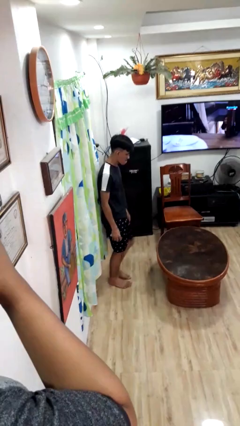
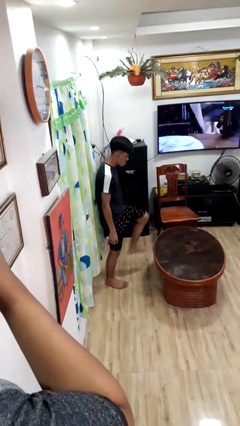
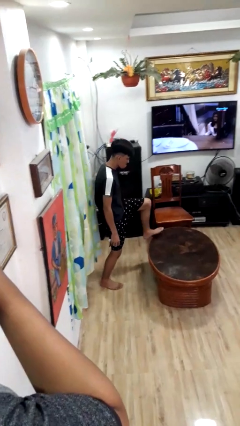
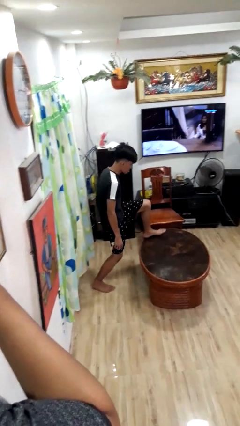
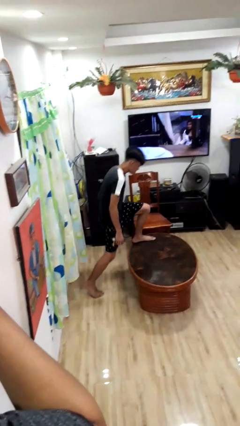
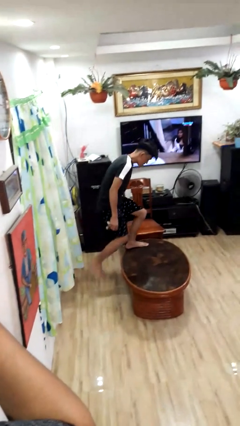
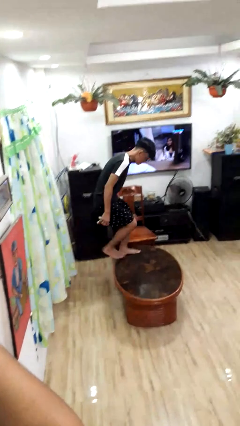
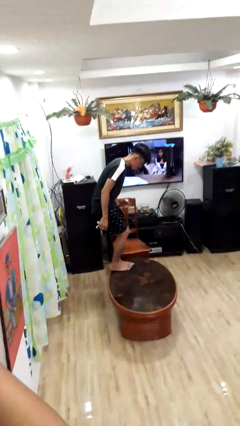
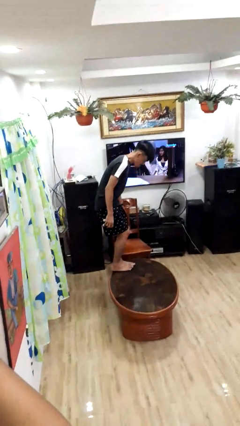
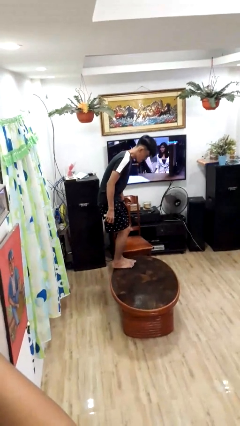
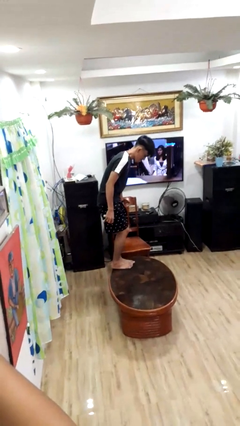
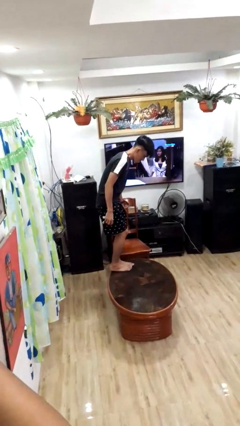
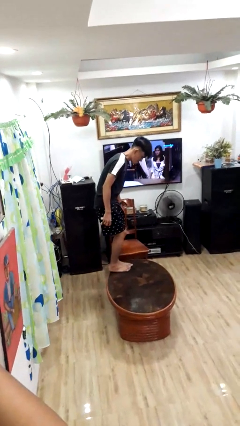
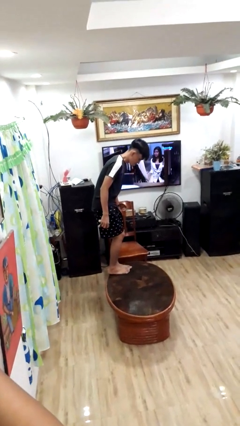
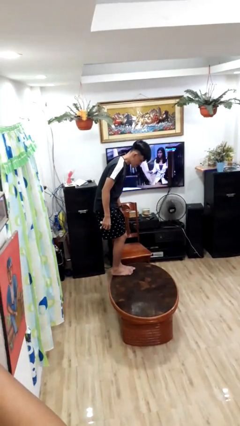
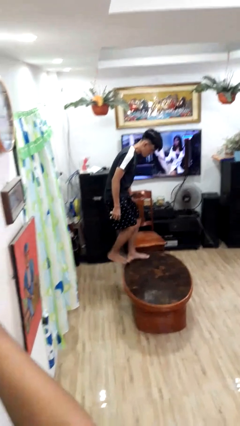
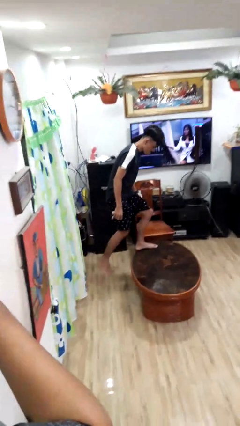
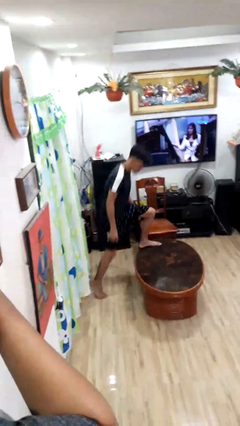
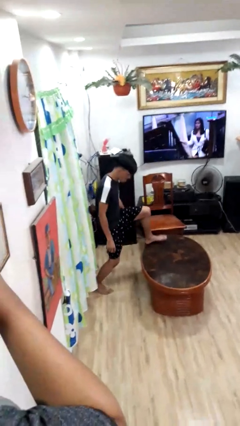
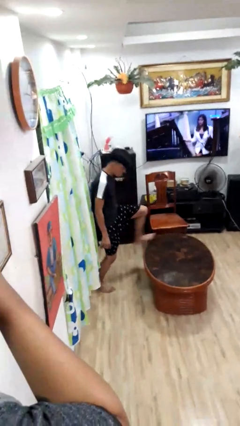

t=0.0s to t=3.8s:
person climbs on table

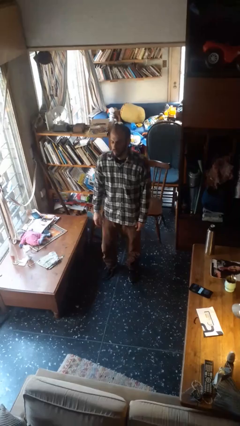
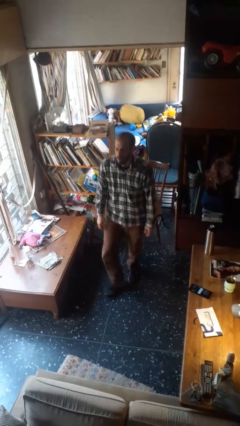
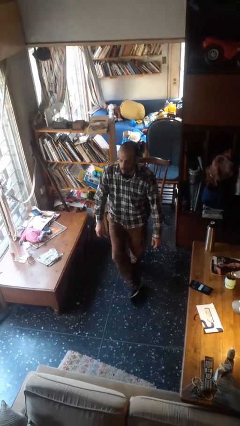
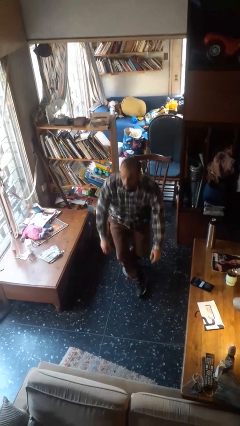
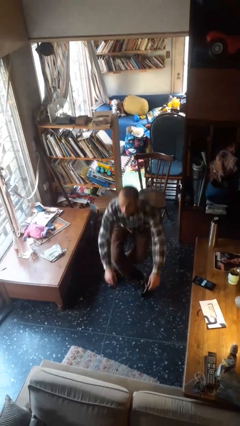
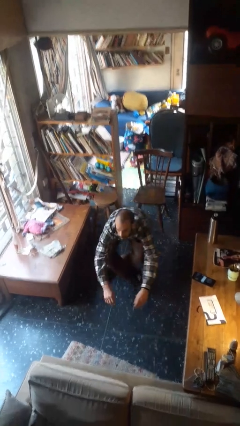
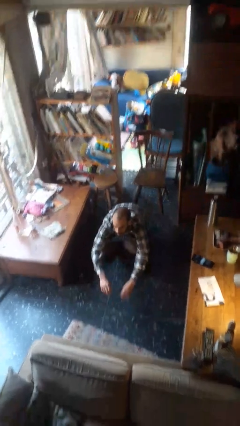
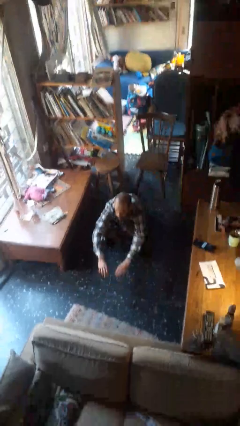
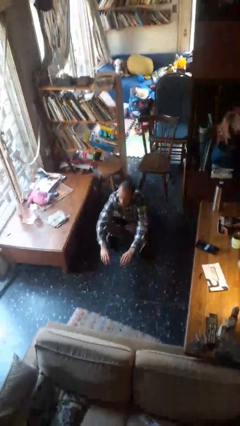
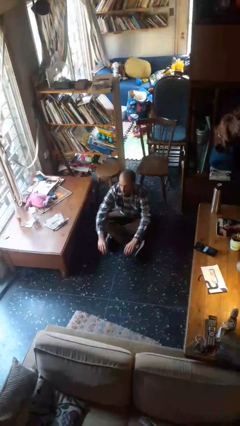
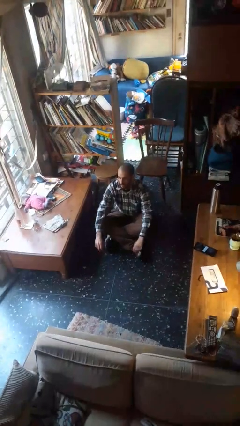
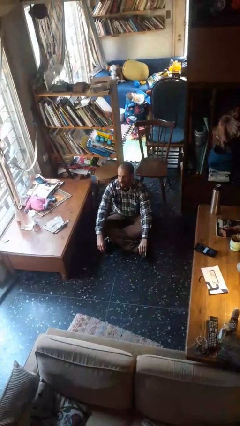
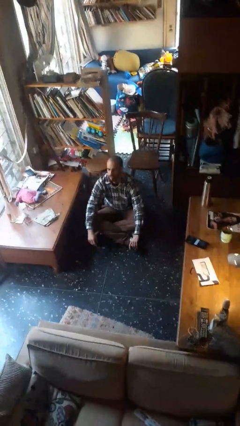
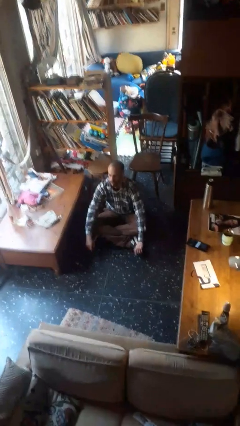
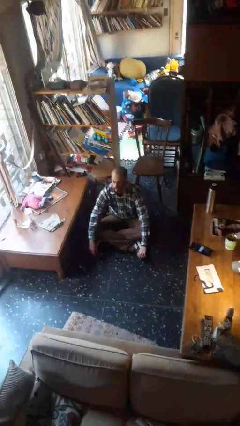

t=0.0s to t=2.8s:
person sits crisscross

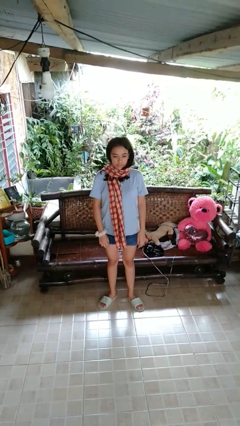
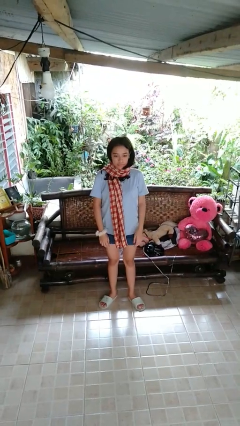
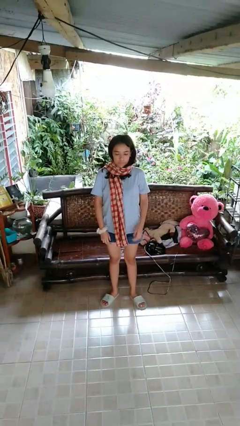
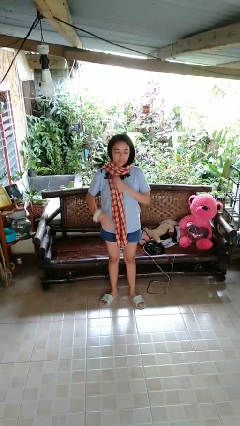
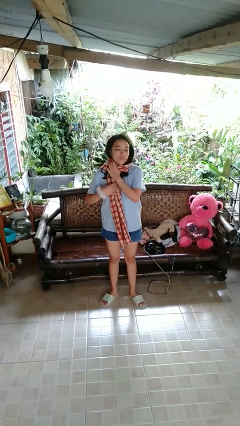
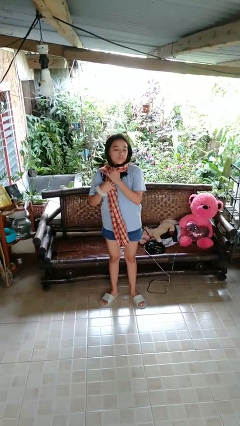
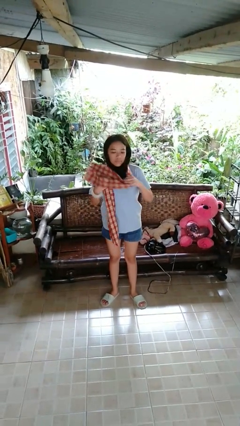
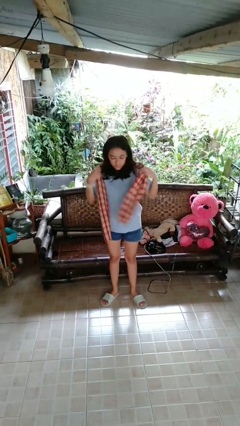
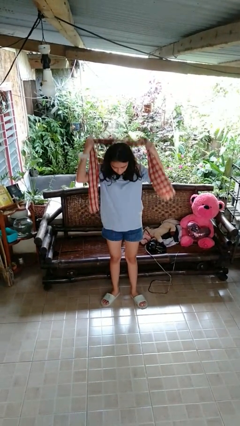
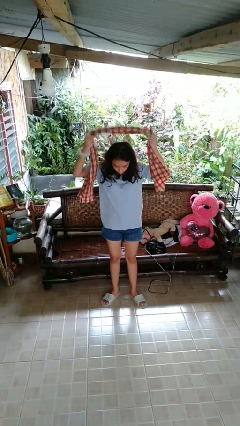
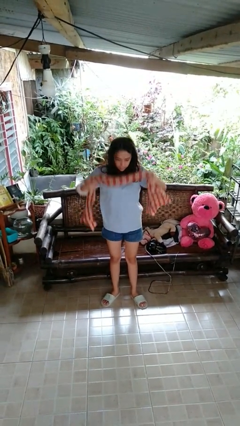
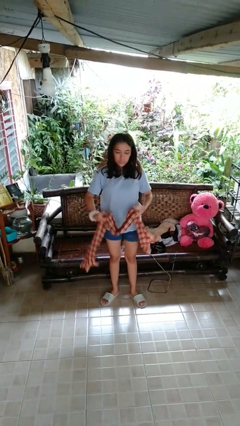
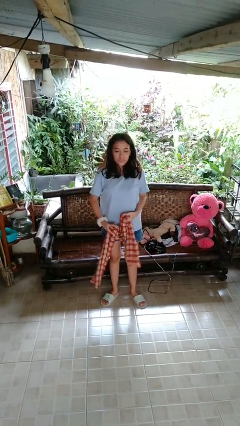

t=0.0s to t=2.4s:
person takes off scarf

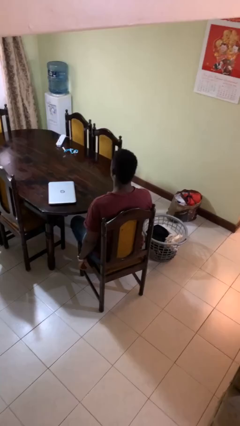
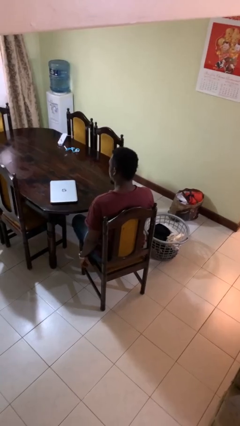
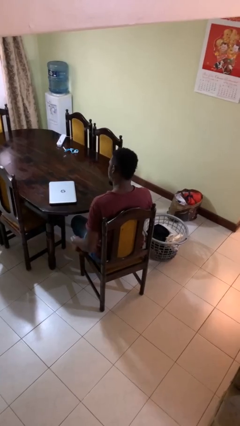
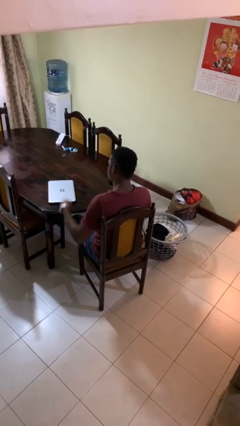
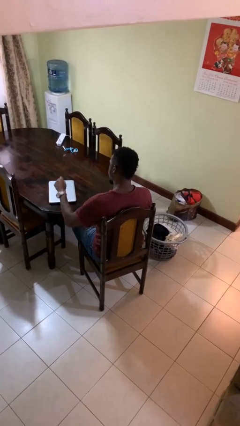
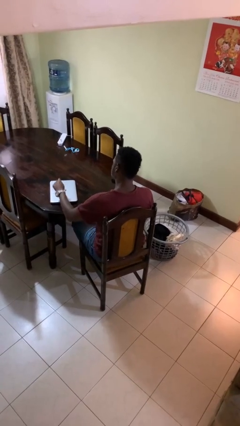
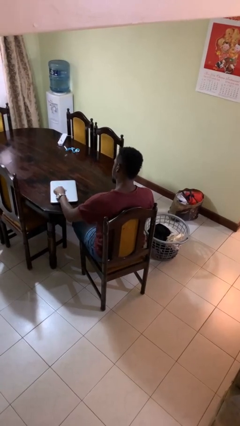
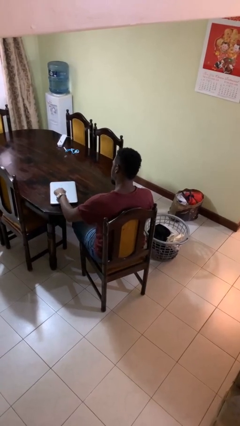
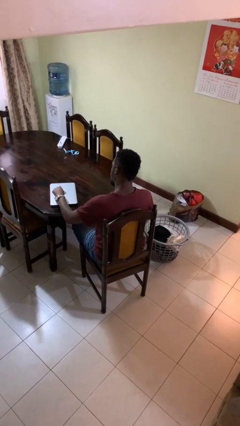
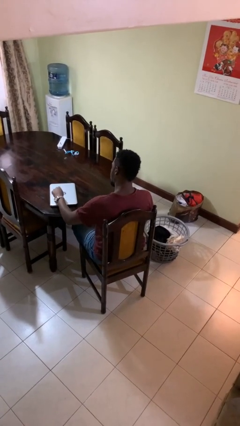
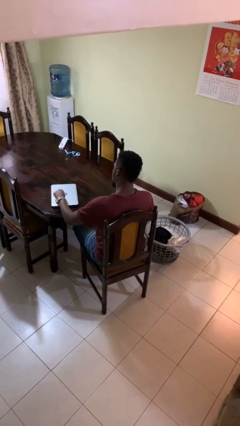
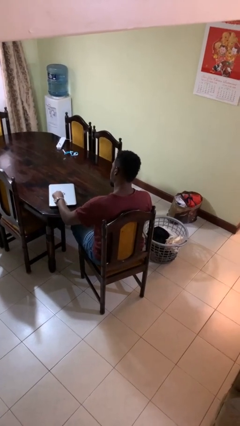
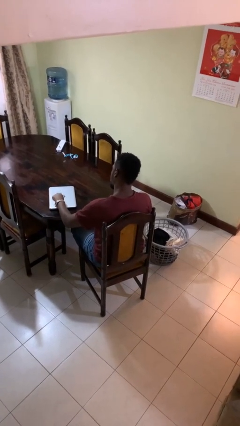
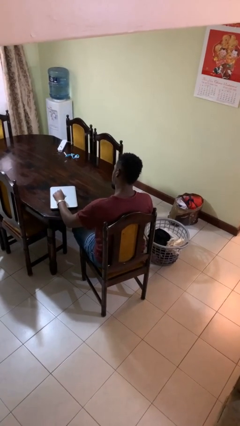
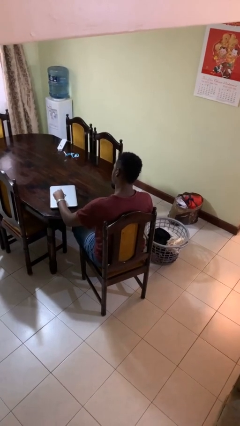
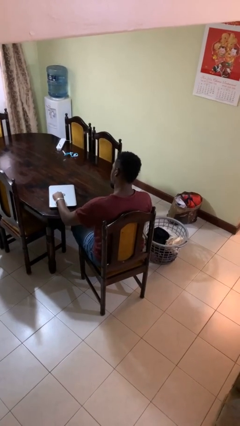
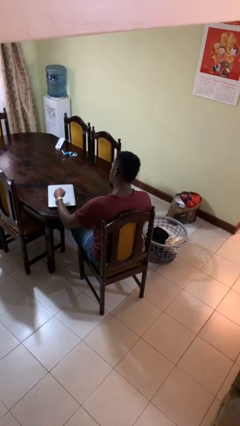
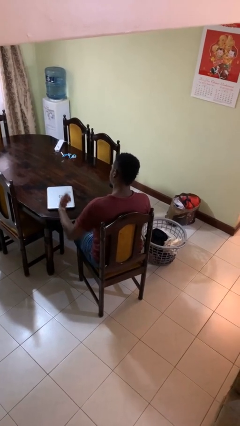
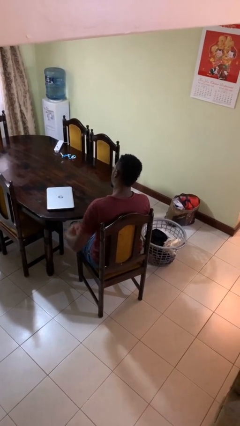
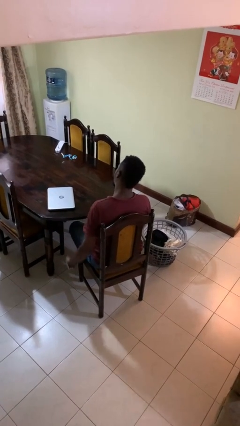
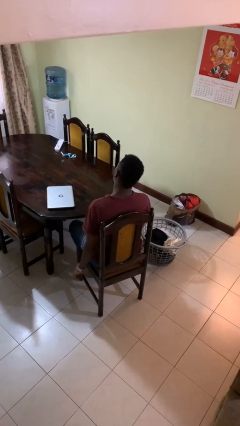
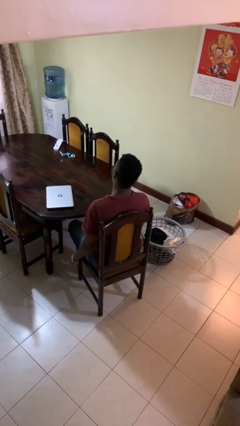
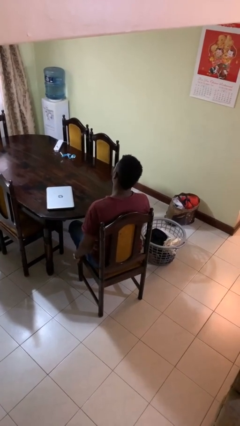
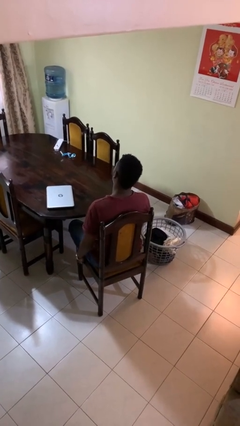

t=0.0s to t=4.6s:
person taps object with finger

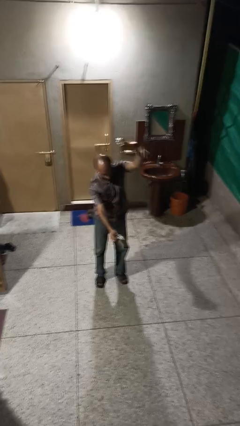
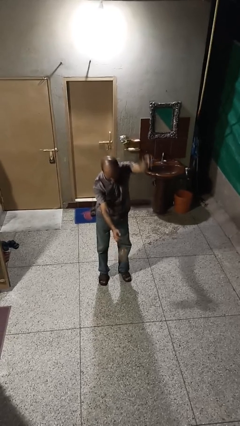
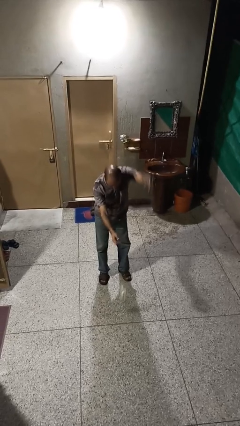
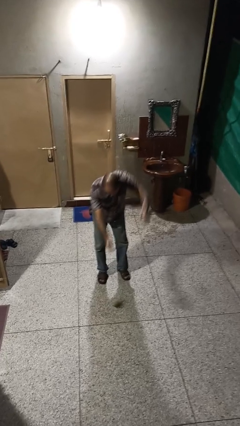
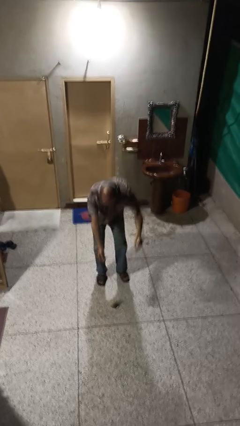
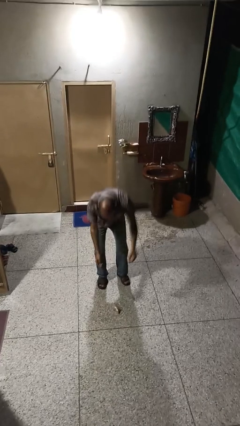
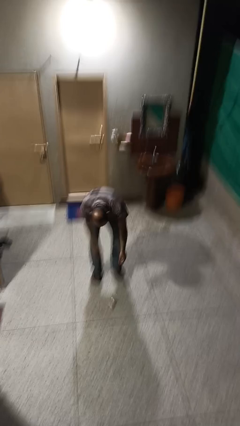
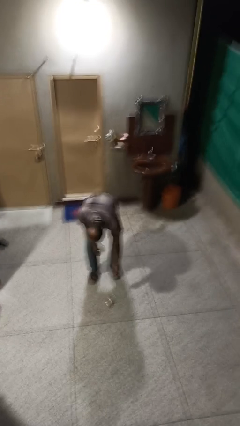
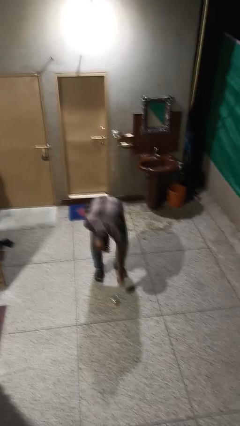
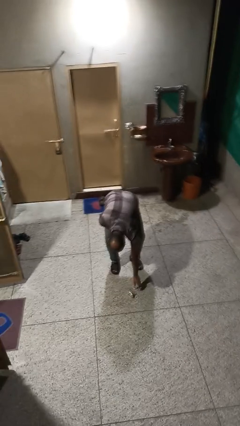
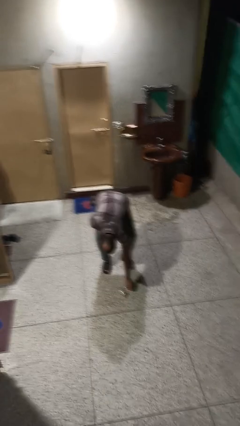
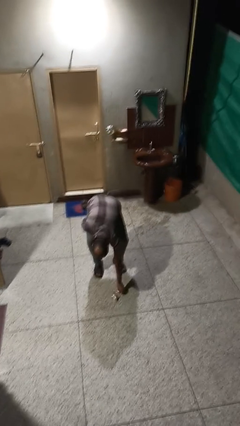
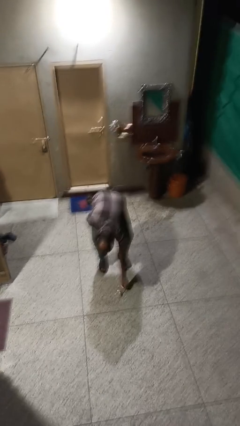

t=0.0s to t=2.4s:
person catches dropped object

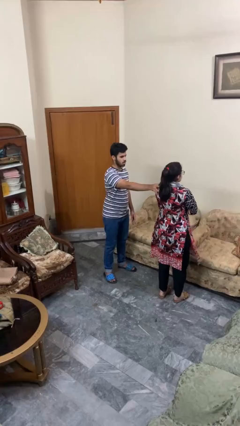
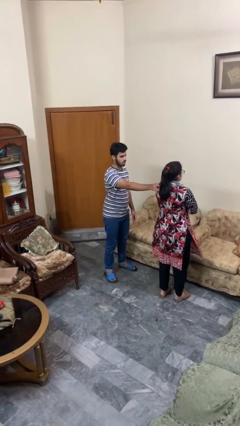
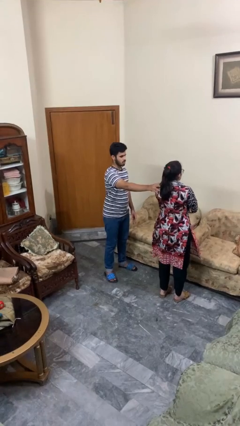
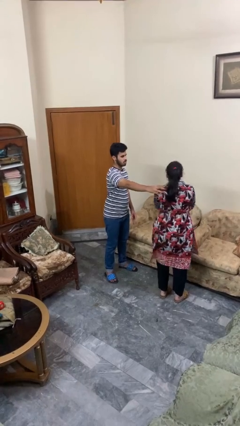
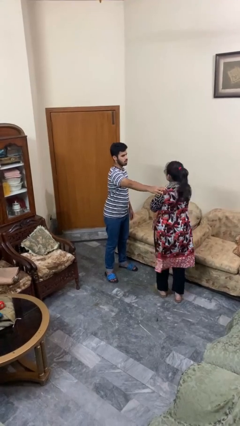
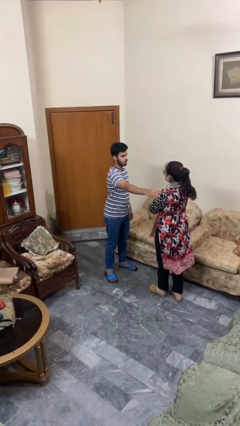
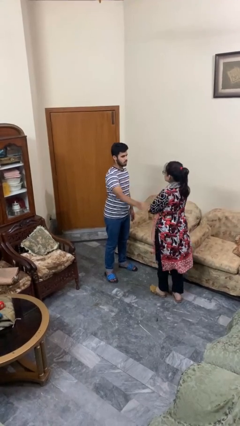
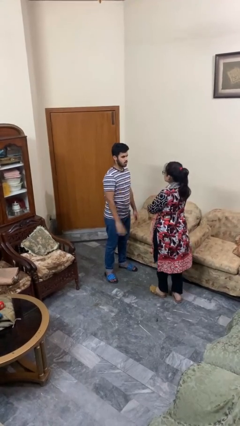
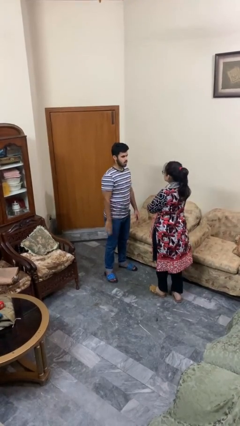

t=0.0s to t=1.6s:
person spins person around
